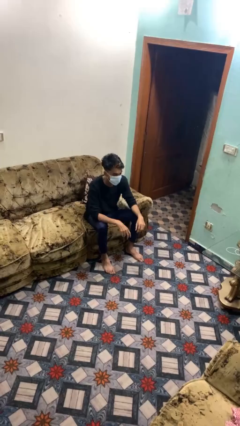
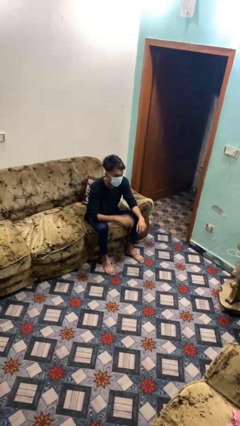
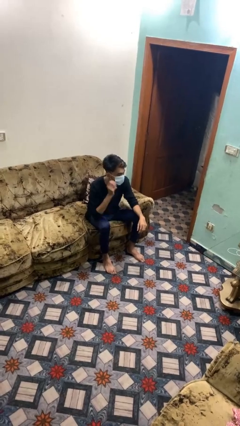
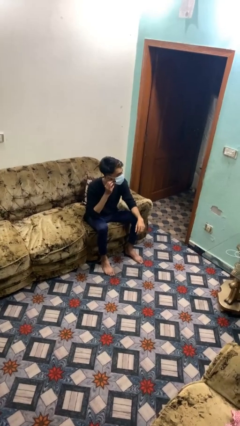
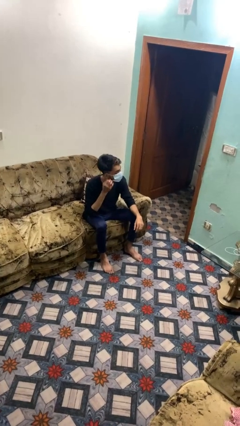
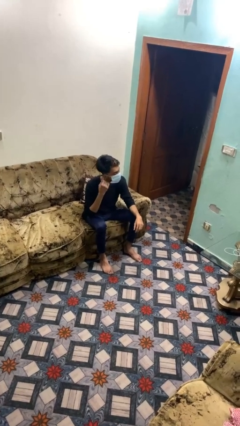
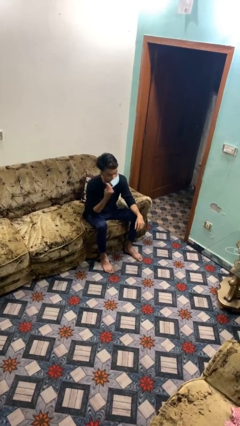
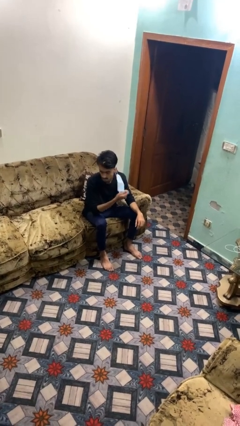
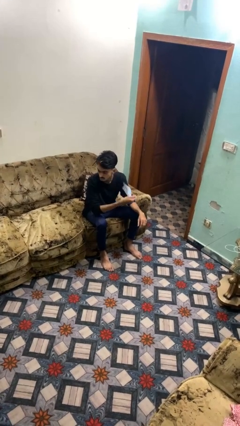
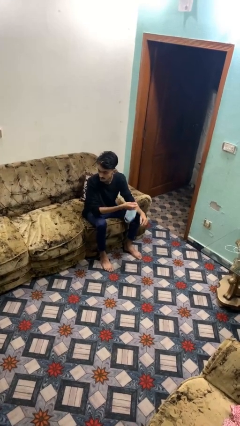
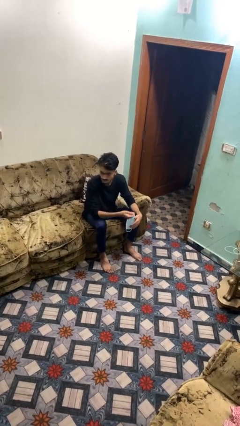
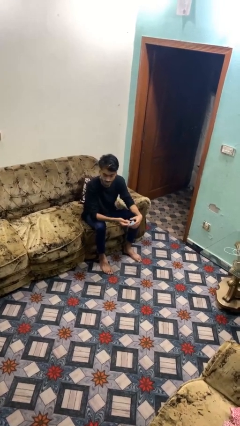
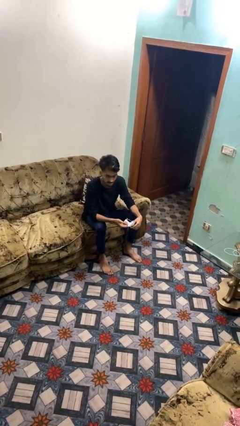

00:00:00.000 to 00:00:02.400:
person takes off facemask

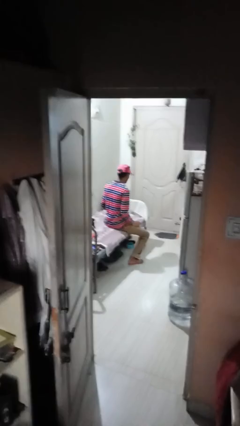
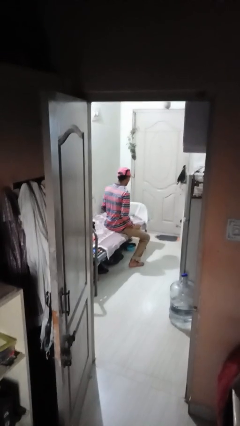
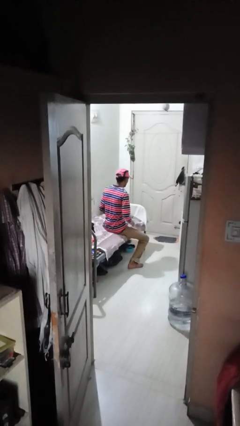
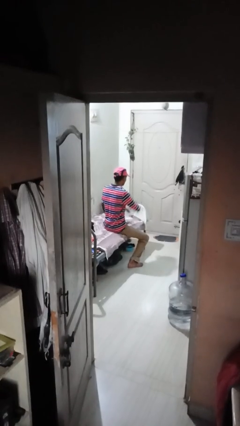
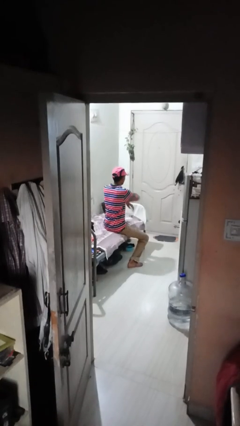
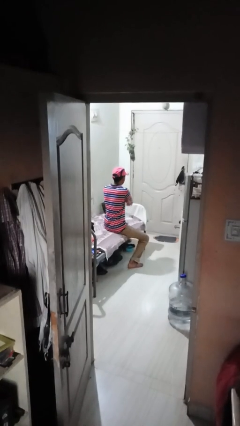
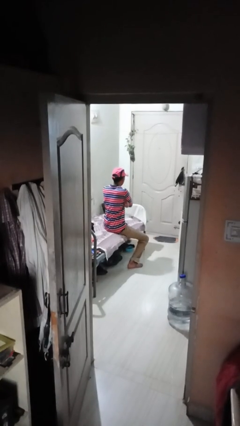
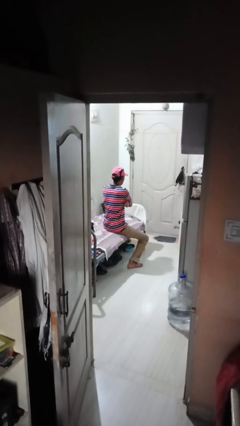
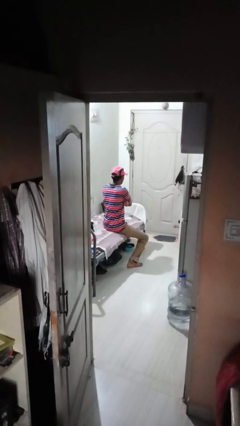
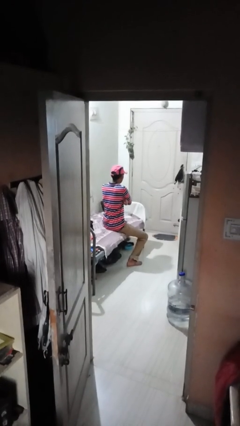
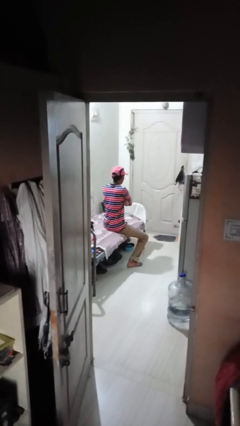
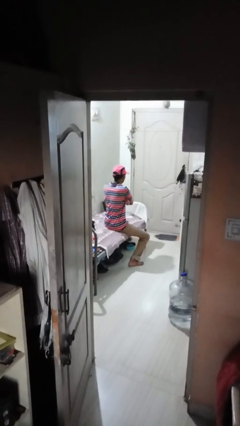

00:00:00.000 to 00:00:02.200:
person crosses arms

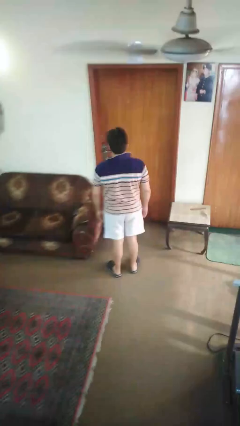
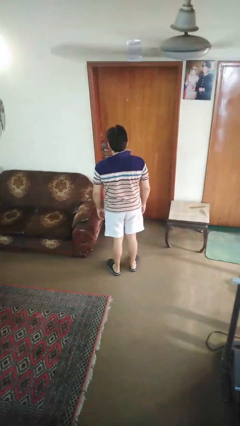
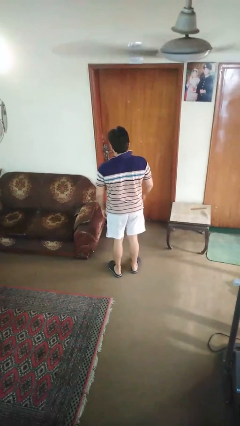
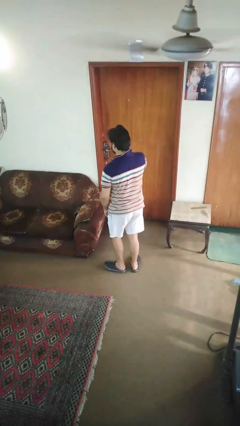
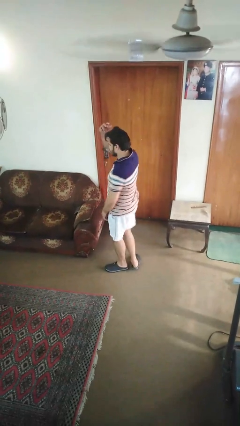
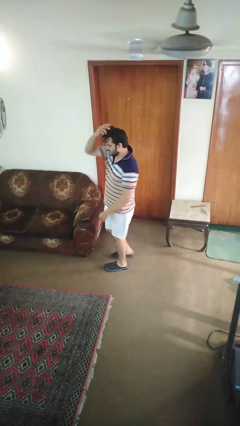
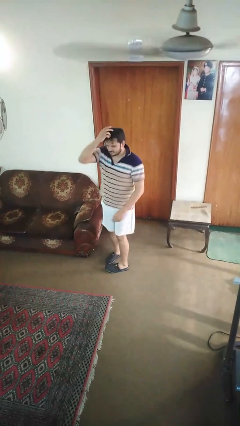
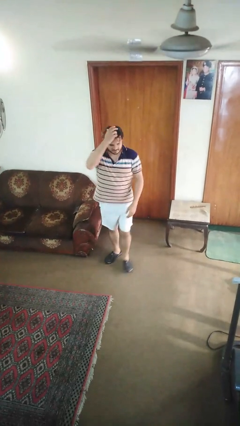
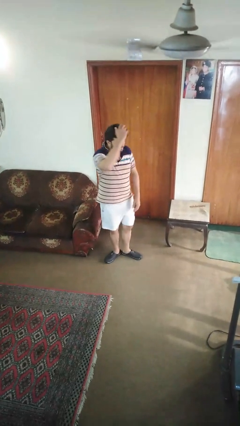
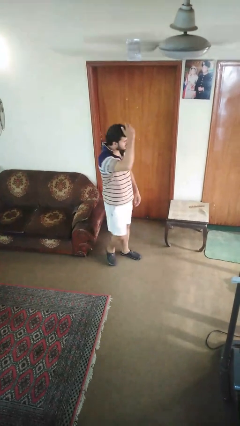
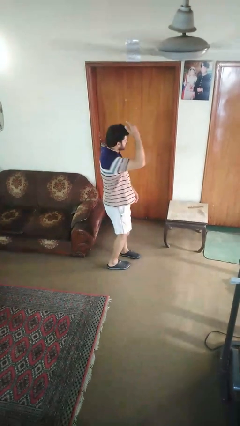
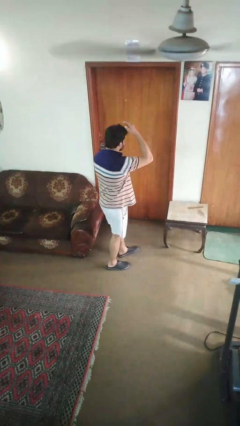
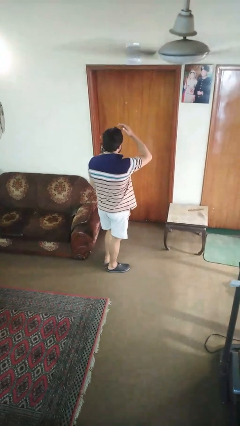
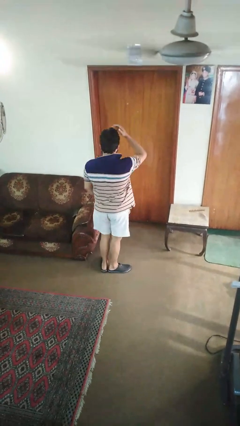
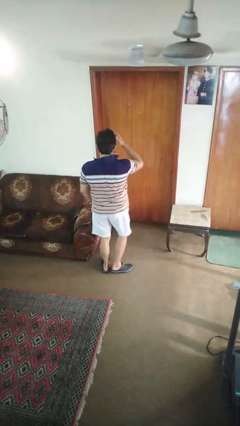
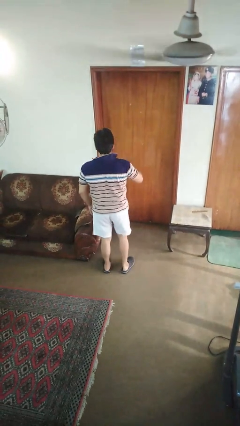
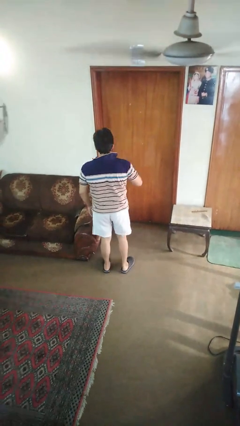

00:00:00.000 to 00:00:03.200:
person twirls

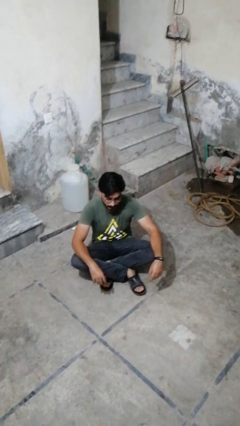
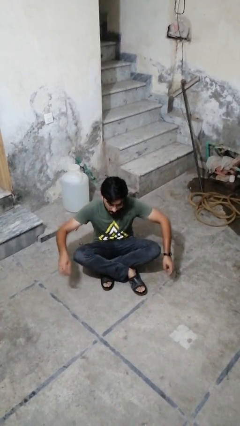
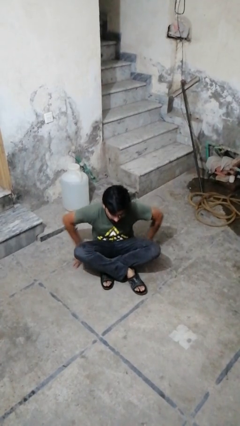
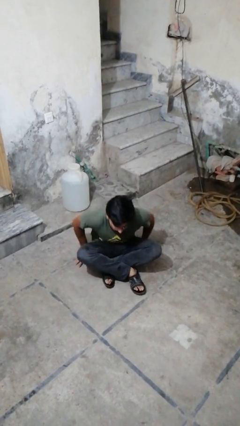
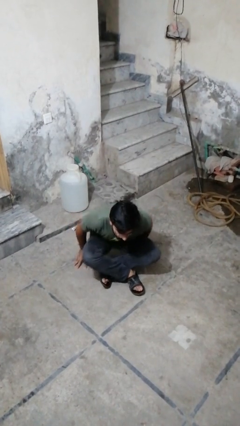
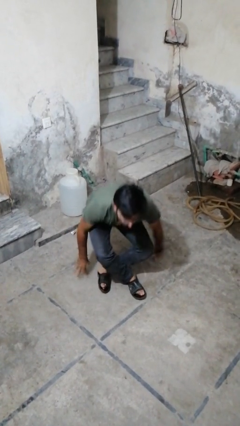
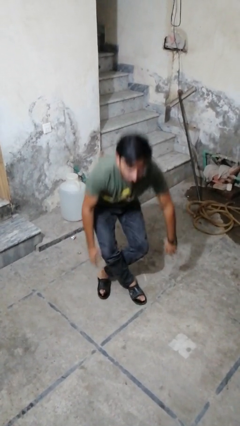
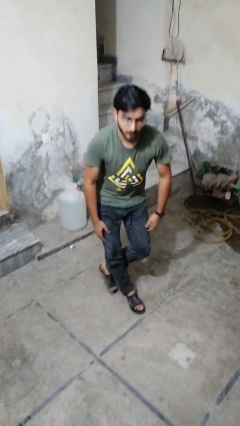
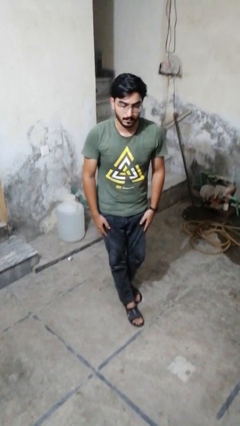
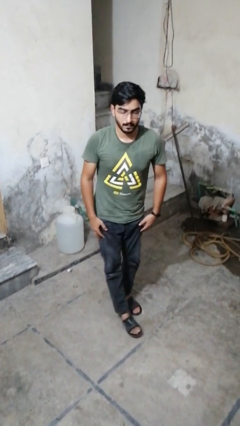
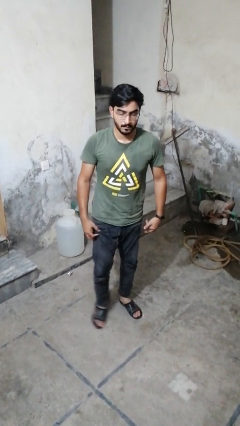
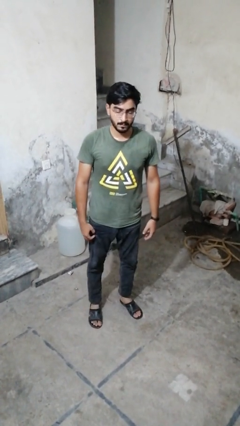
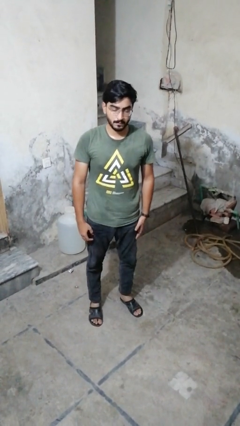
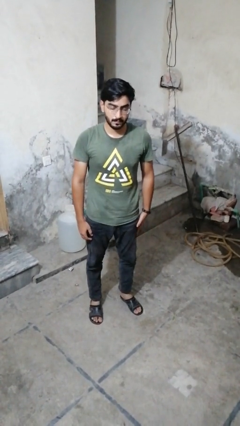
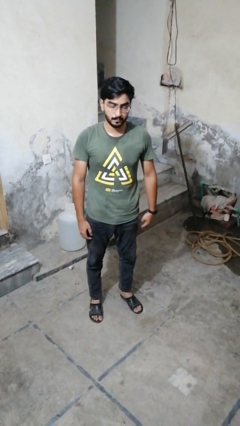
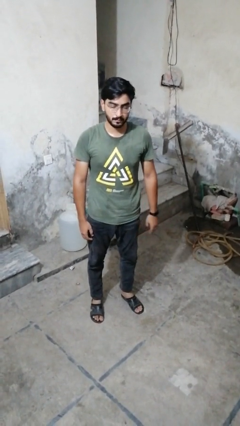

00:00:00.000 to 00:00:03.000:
person stands up from floor

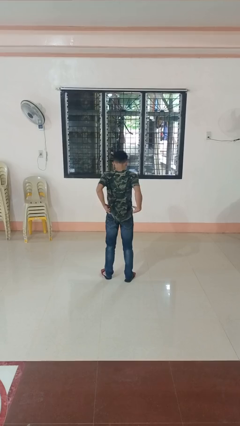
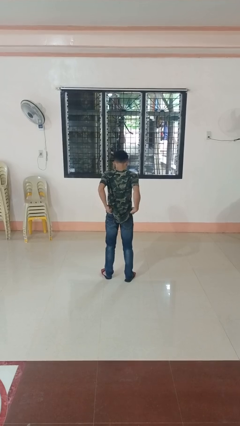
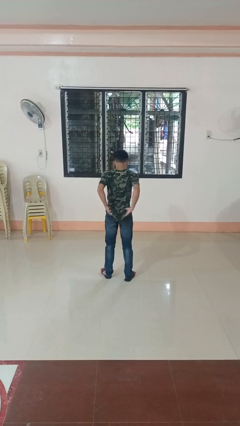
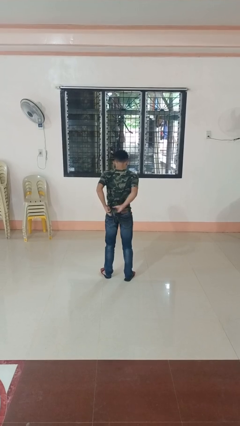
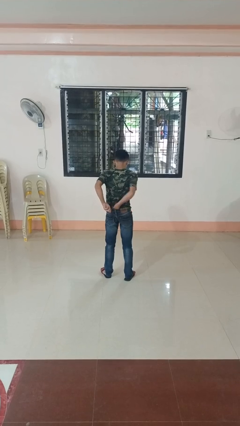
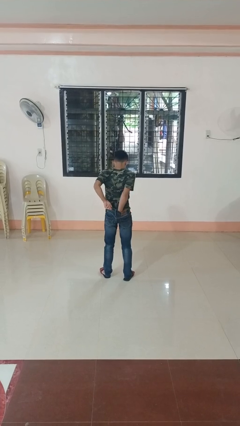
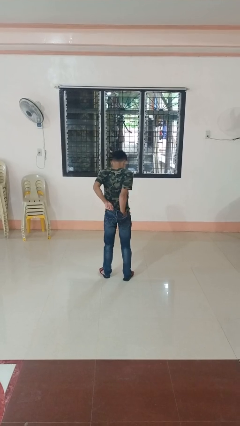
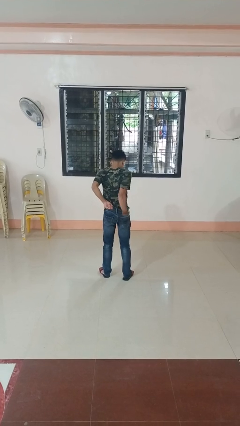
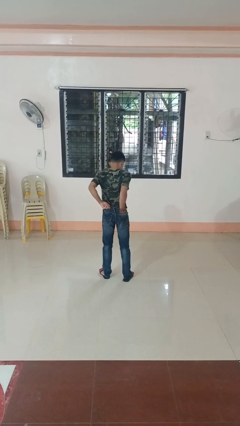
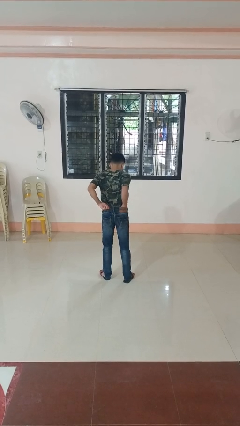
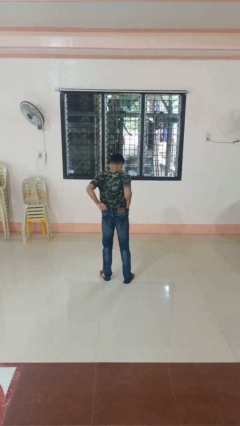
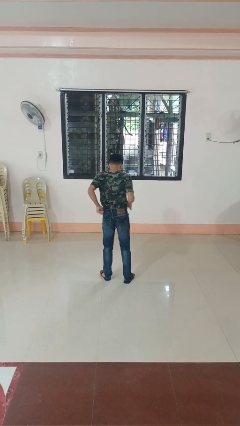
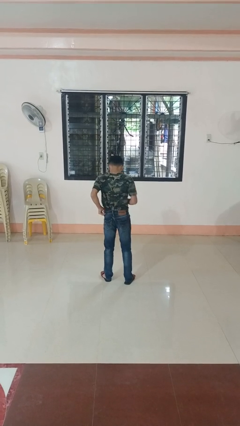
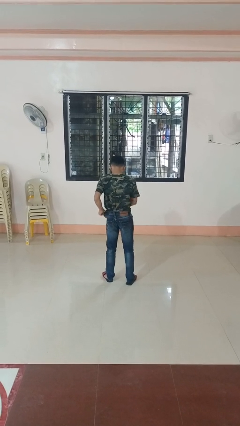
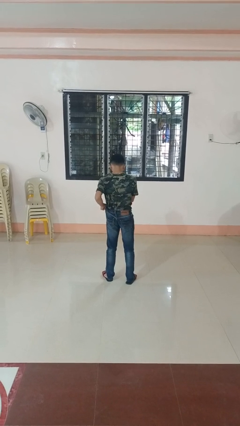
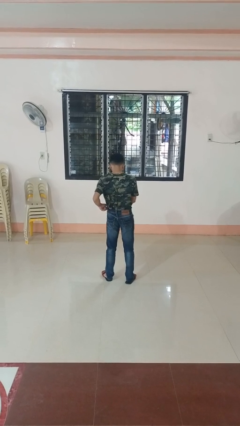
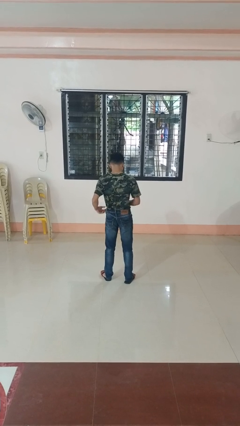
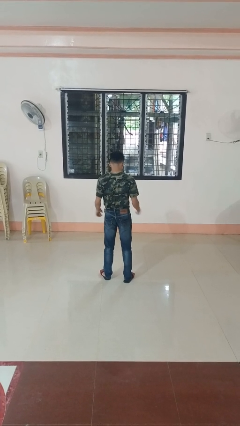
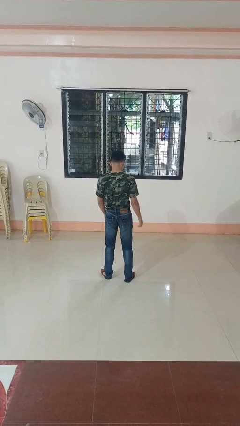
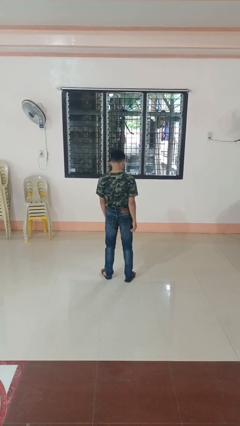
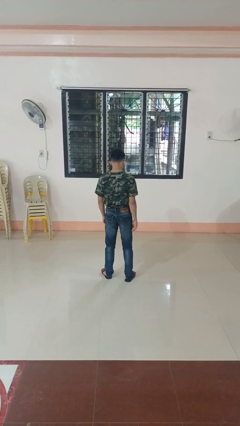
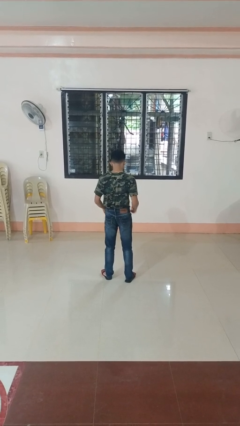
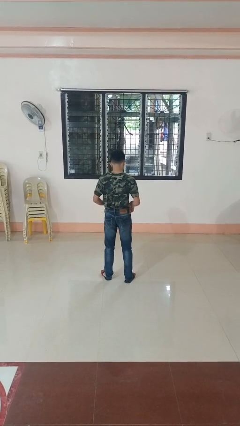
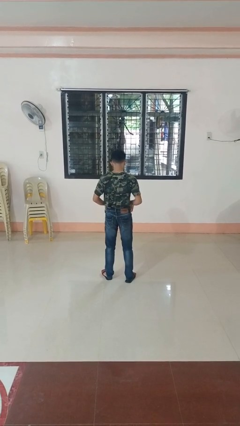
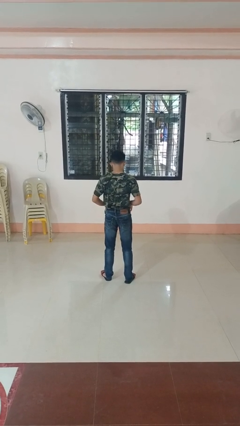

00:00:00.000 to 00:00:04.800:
person tucks in shirt

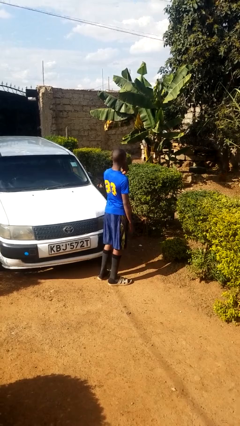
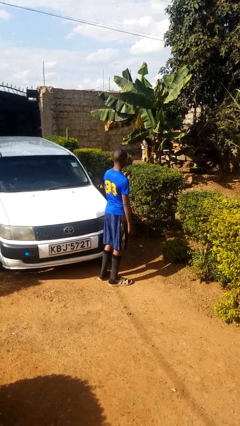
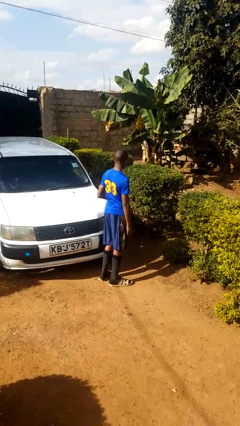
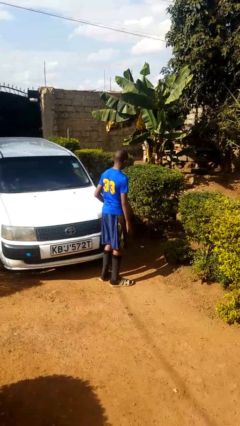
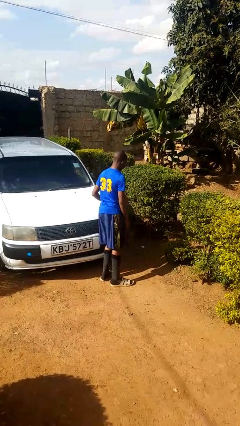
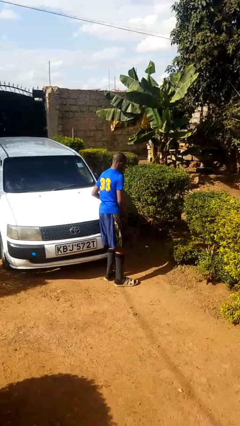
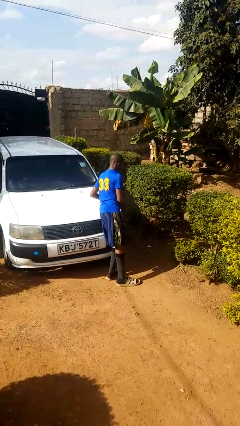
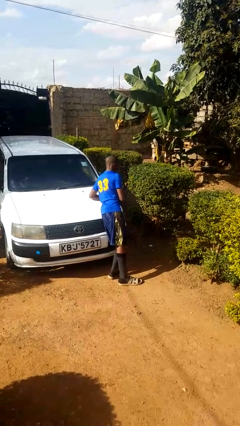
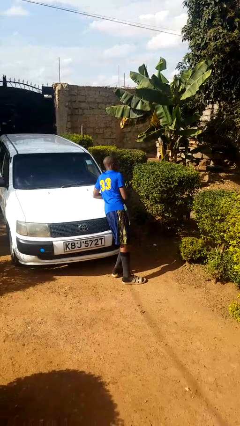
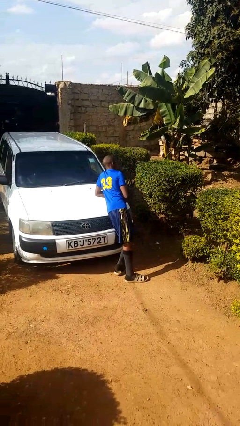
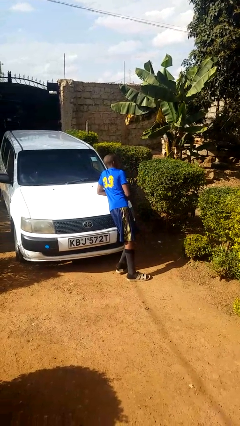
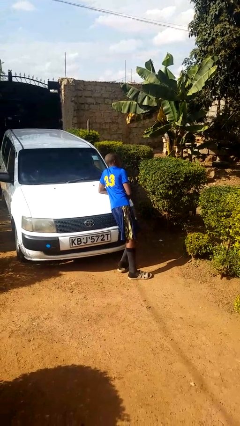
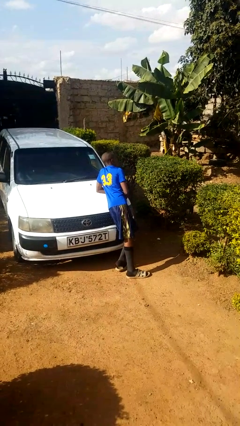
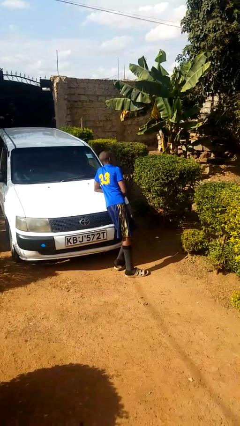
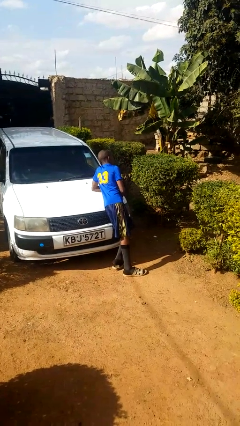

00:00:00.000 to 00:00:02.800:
person leans against car
